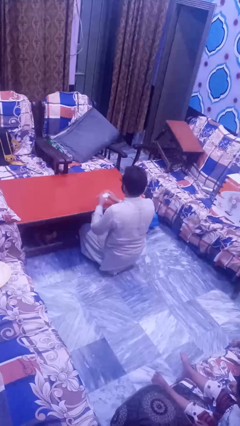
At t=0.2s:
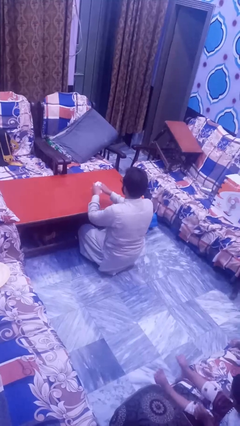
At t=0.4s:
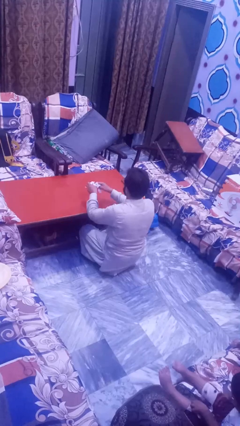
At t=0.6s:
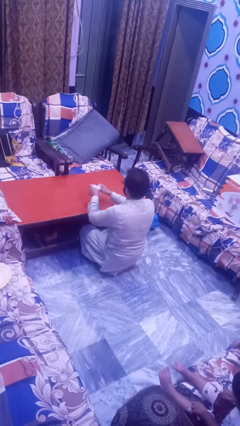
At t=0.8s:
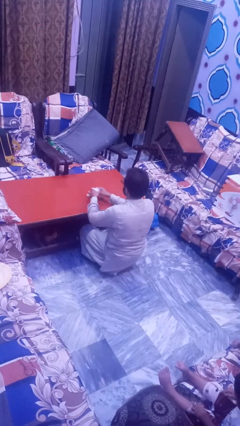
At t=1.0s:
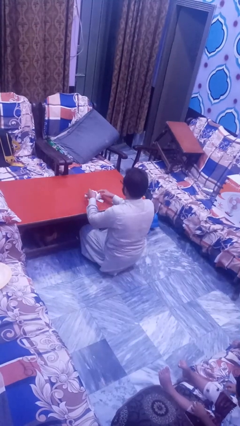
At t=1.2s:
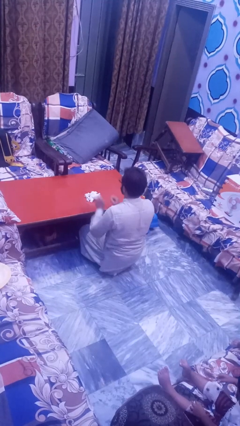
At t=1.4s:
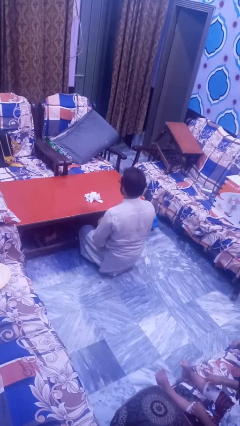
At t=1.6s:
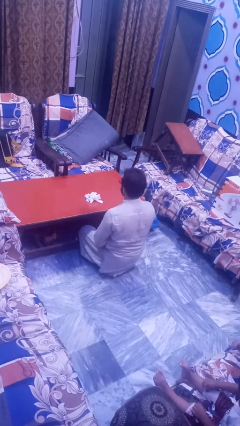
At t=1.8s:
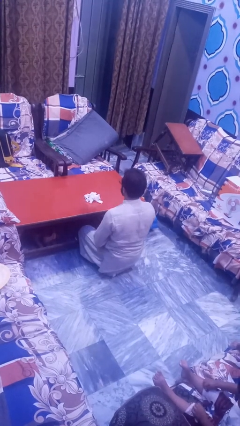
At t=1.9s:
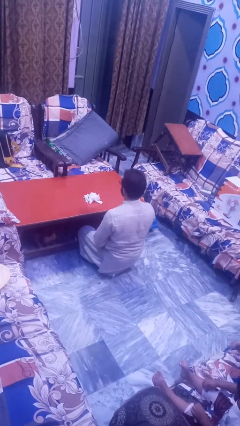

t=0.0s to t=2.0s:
person tears paper

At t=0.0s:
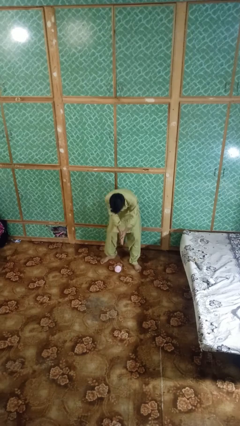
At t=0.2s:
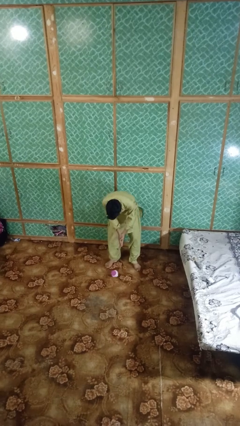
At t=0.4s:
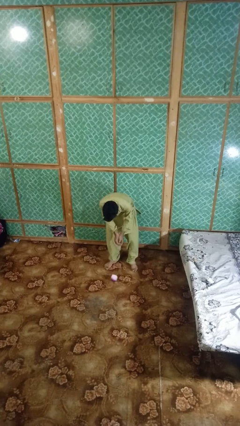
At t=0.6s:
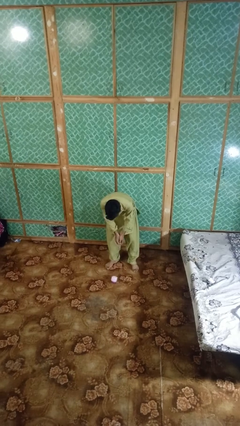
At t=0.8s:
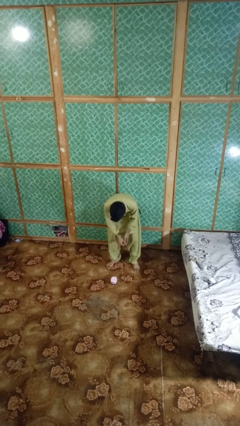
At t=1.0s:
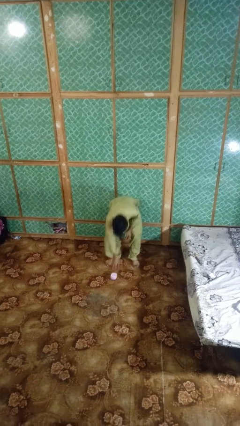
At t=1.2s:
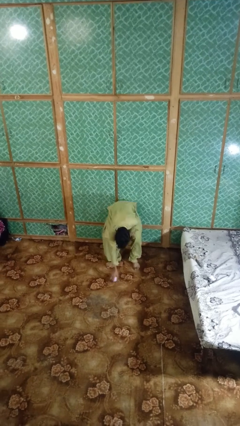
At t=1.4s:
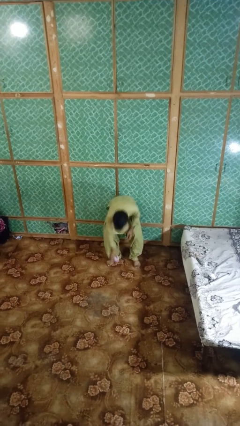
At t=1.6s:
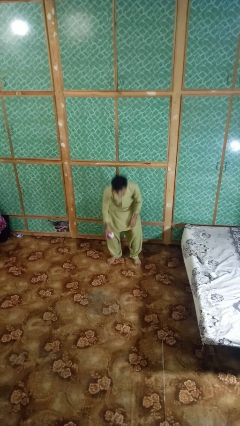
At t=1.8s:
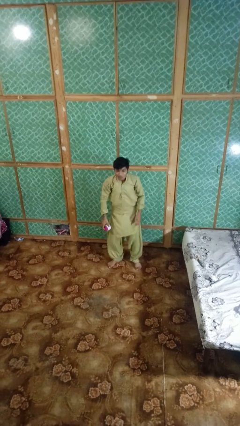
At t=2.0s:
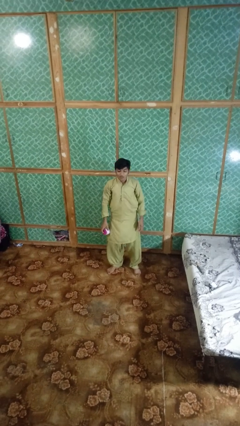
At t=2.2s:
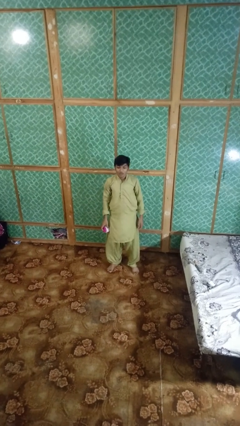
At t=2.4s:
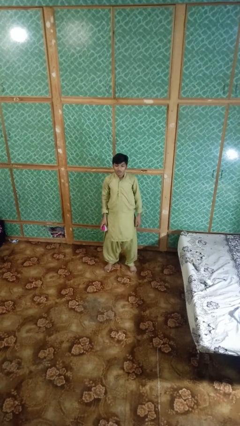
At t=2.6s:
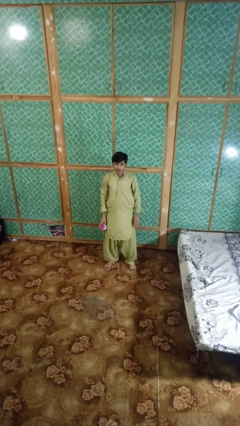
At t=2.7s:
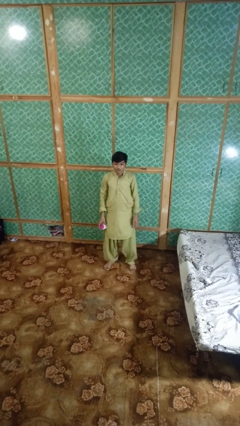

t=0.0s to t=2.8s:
person picks up object from floor

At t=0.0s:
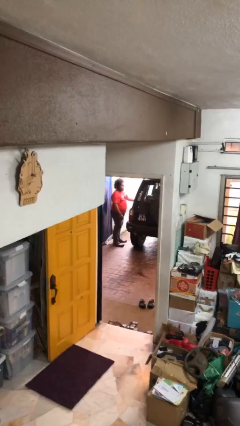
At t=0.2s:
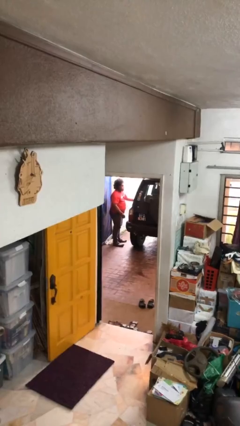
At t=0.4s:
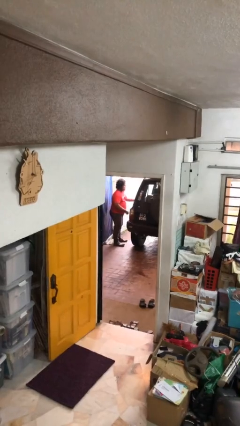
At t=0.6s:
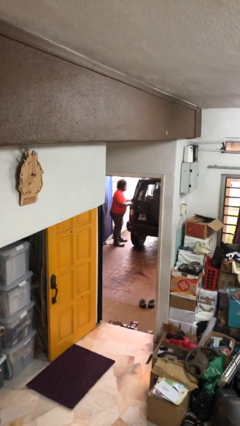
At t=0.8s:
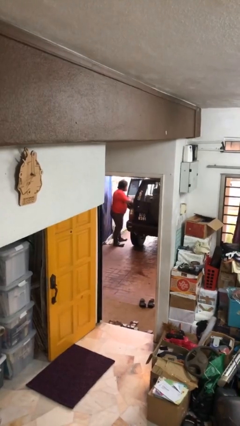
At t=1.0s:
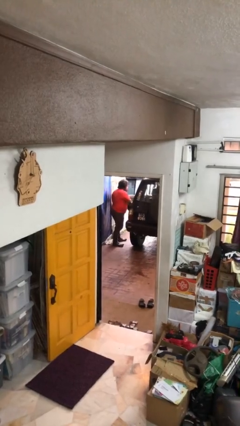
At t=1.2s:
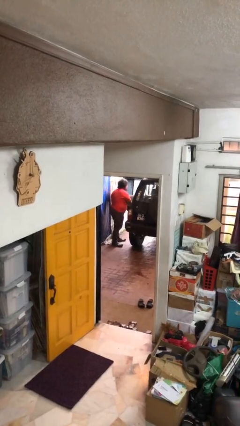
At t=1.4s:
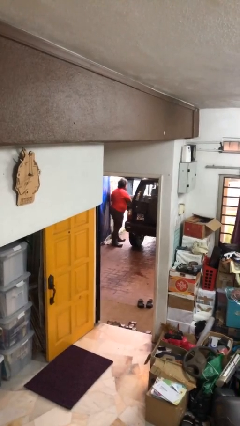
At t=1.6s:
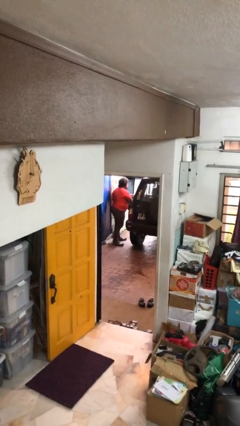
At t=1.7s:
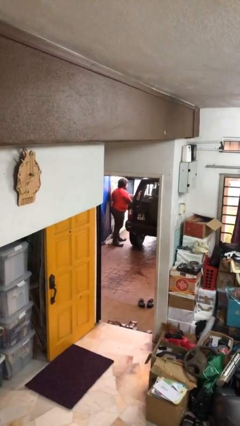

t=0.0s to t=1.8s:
person opens car door

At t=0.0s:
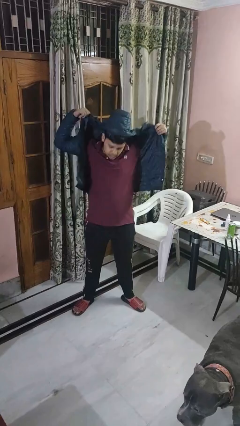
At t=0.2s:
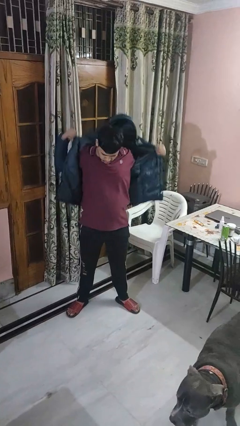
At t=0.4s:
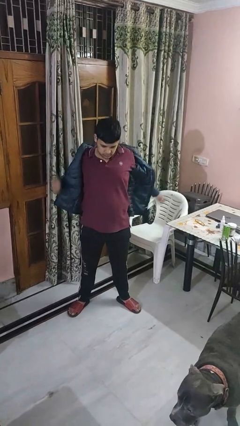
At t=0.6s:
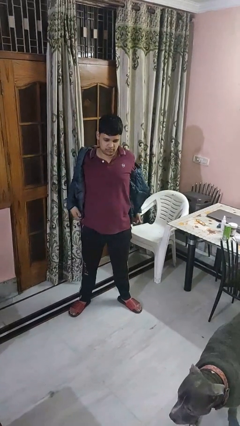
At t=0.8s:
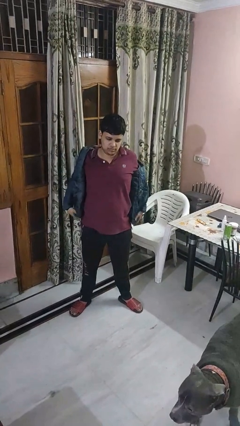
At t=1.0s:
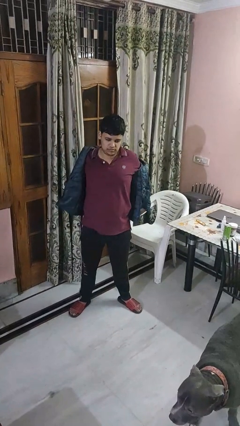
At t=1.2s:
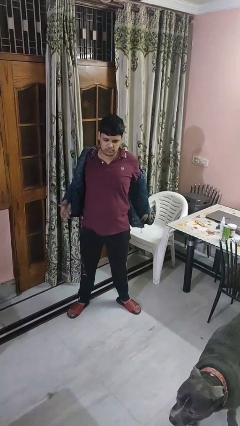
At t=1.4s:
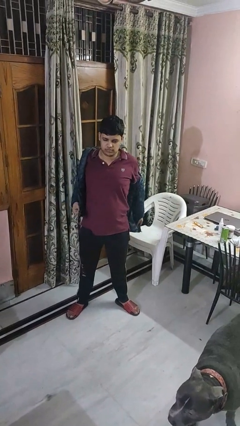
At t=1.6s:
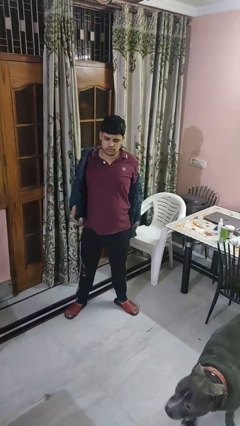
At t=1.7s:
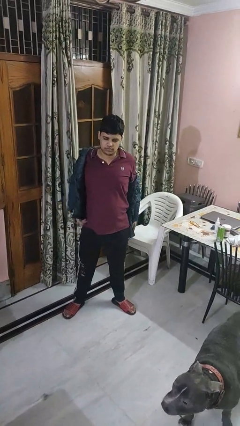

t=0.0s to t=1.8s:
person takes off hoodie

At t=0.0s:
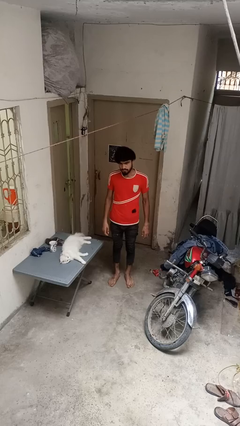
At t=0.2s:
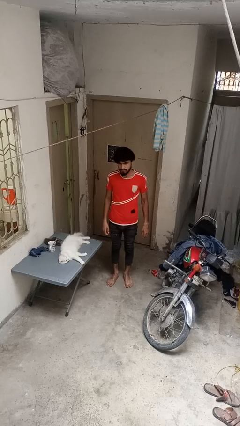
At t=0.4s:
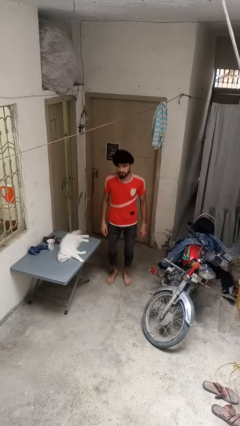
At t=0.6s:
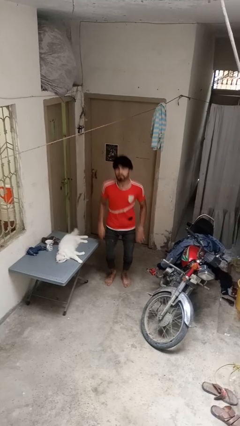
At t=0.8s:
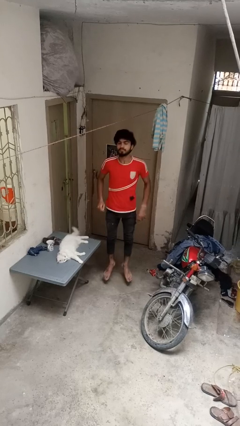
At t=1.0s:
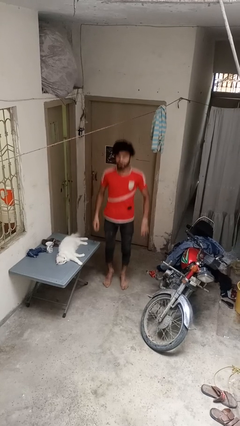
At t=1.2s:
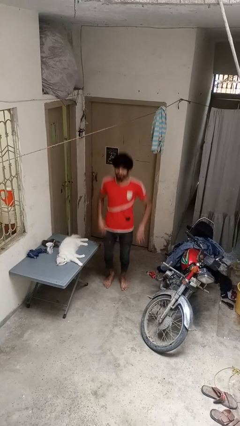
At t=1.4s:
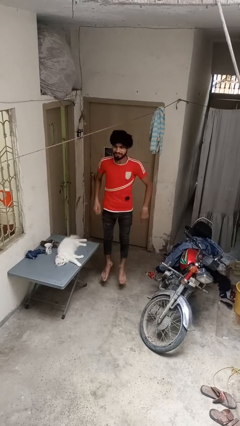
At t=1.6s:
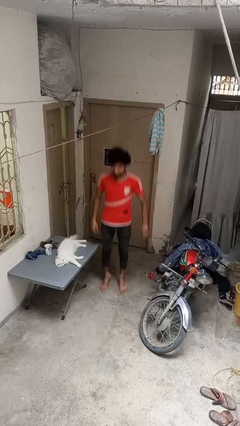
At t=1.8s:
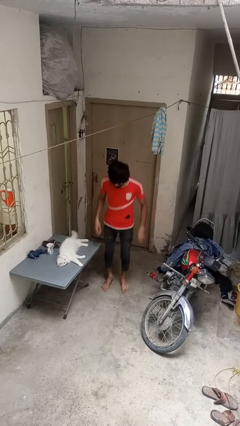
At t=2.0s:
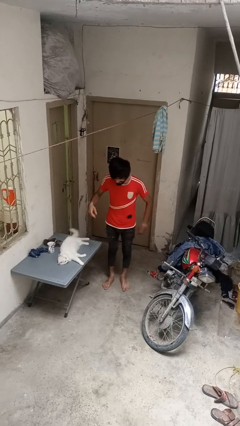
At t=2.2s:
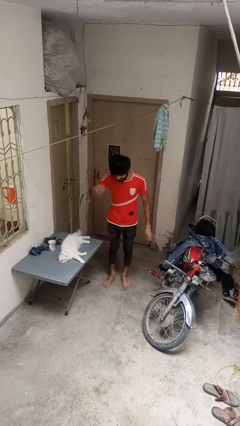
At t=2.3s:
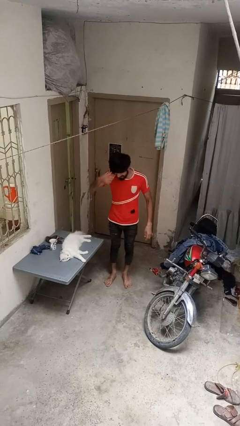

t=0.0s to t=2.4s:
person jumps

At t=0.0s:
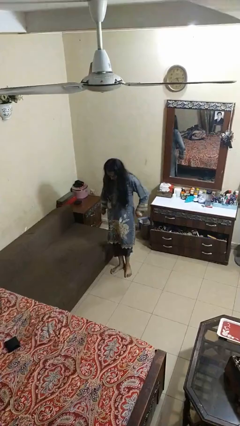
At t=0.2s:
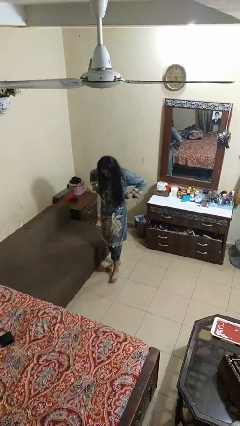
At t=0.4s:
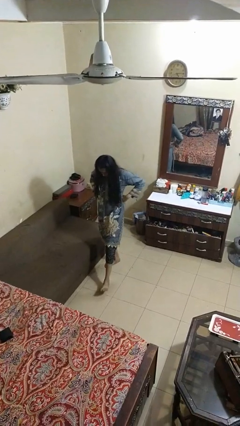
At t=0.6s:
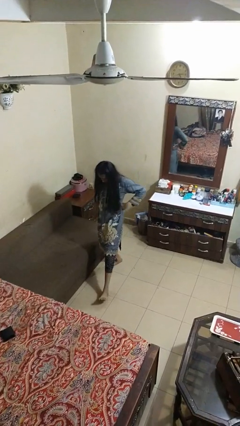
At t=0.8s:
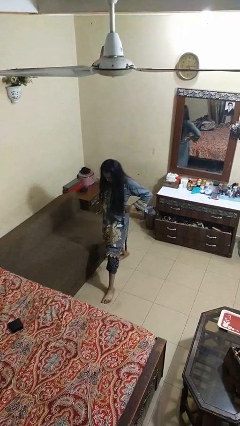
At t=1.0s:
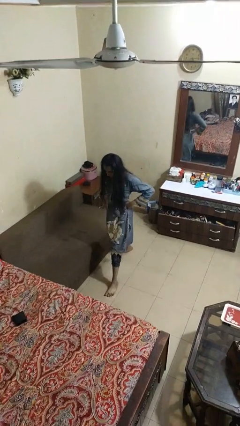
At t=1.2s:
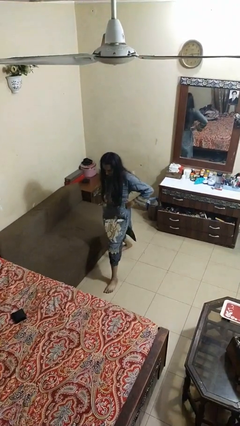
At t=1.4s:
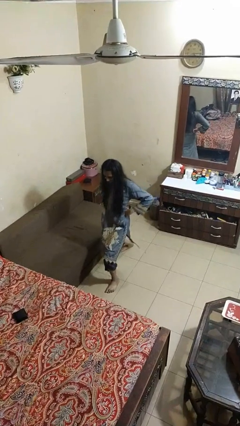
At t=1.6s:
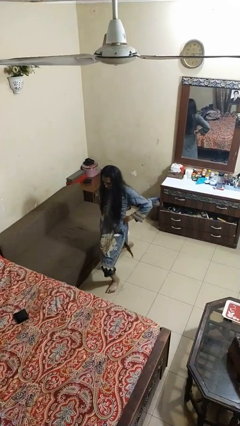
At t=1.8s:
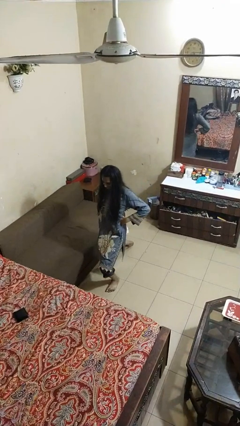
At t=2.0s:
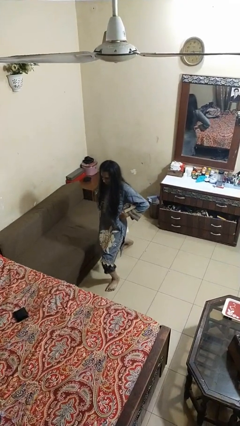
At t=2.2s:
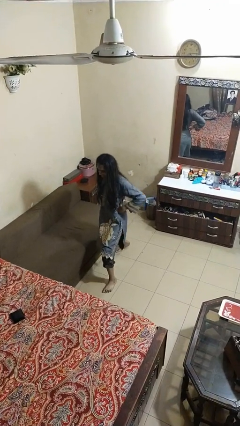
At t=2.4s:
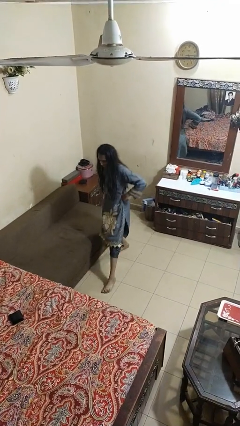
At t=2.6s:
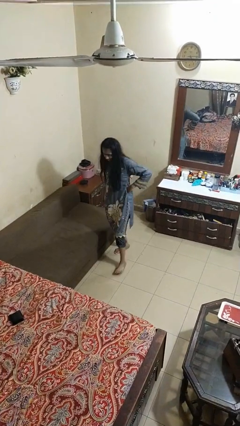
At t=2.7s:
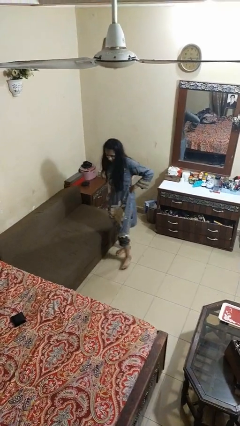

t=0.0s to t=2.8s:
person exercises with lunges

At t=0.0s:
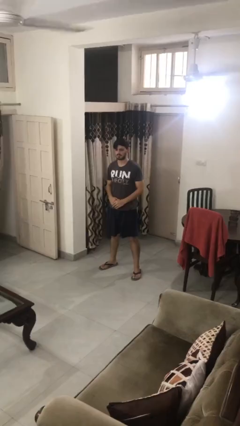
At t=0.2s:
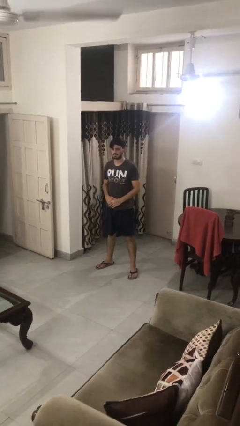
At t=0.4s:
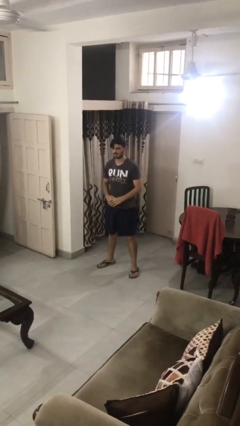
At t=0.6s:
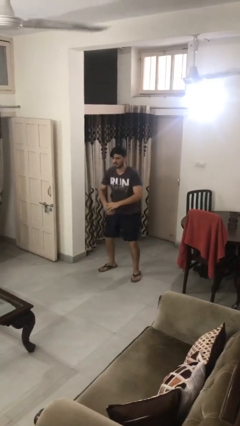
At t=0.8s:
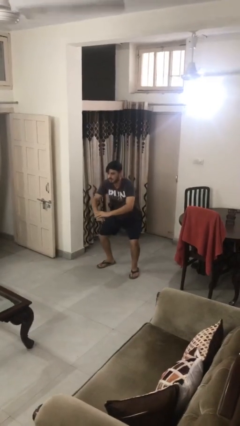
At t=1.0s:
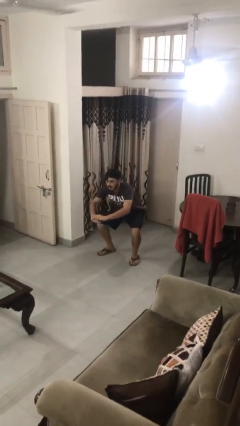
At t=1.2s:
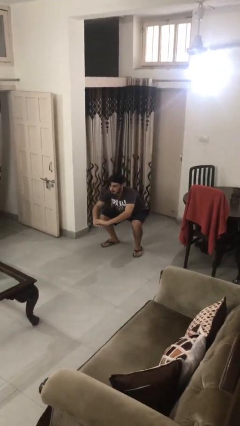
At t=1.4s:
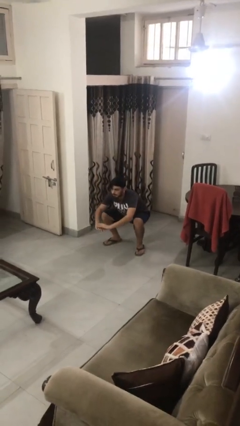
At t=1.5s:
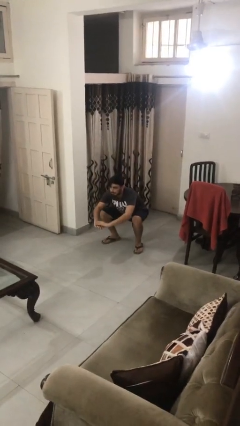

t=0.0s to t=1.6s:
person squats

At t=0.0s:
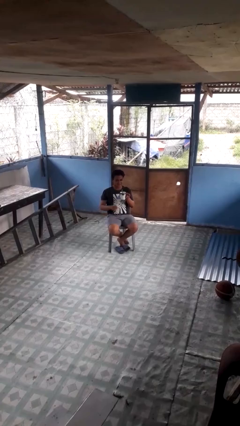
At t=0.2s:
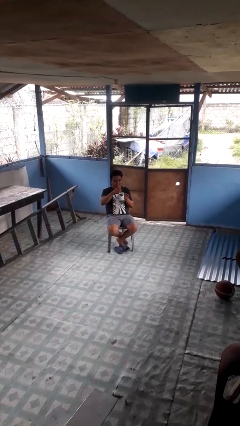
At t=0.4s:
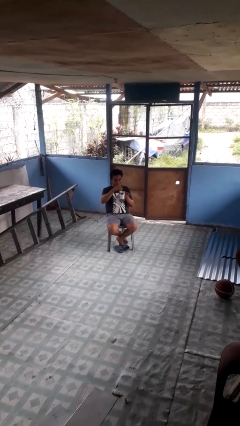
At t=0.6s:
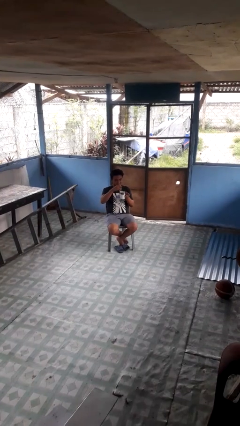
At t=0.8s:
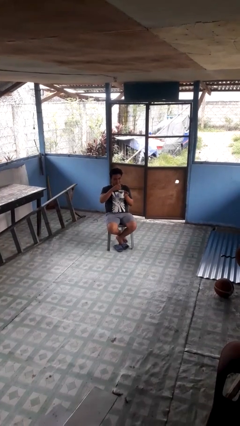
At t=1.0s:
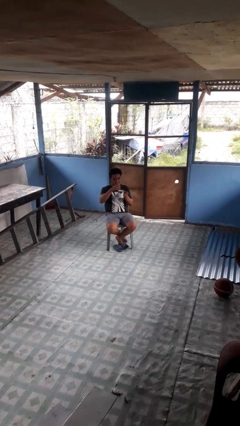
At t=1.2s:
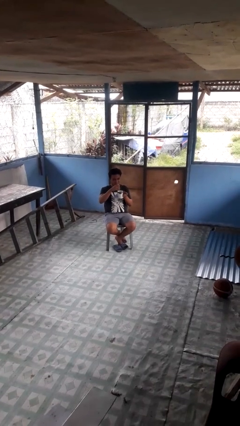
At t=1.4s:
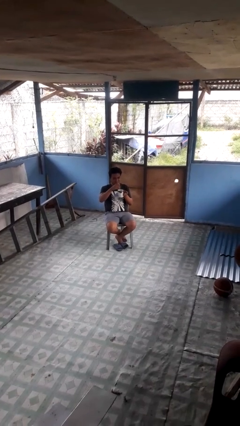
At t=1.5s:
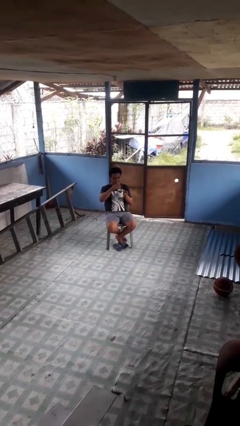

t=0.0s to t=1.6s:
person stirs mug
